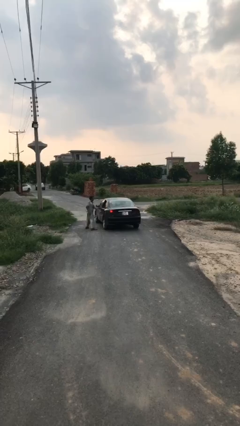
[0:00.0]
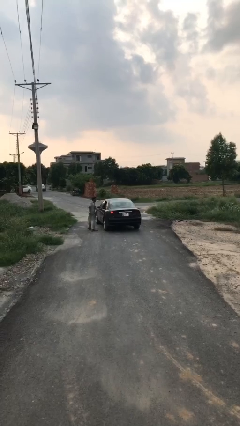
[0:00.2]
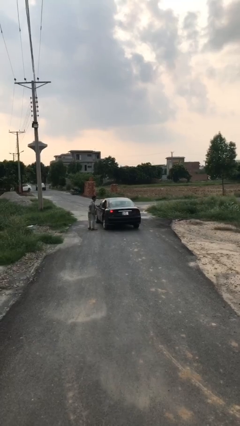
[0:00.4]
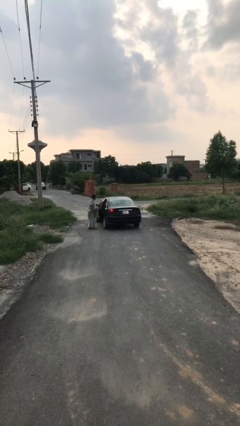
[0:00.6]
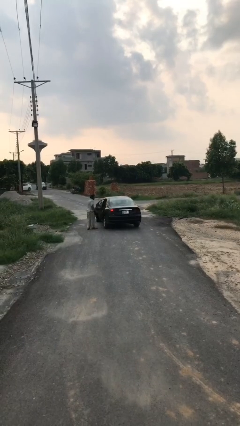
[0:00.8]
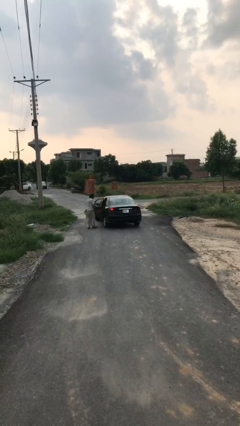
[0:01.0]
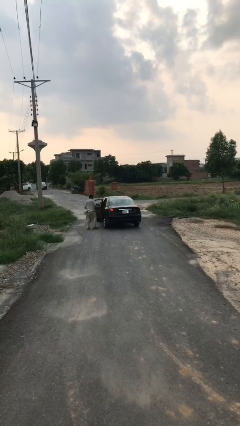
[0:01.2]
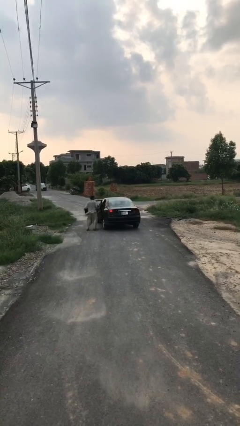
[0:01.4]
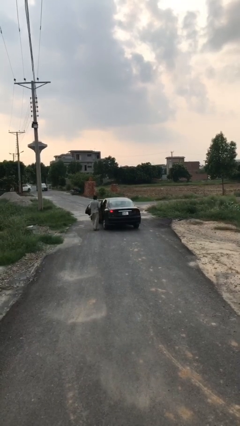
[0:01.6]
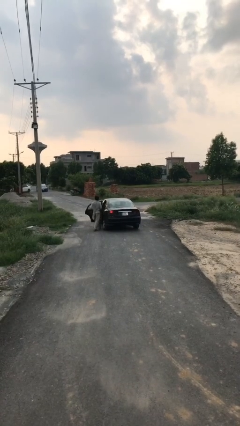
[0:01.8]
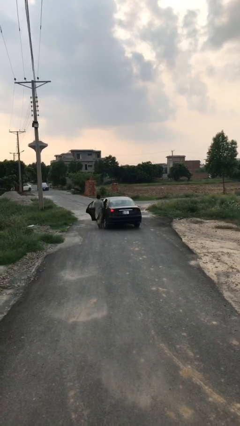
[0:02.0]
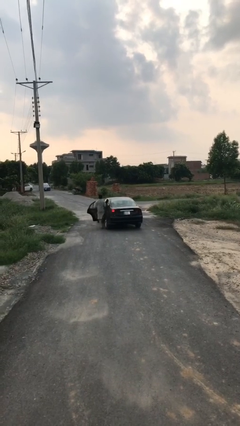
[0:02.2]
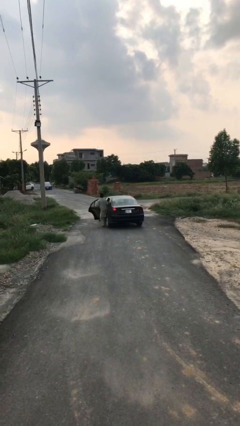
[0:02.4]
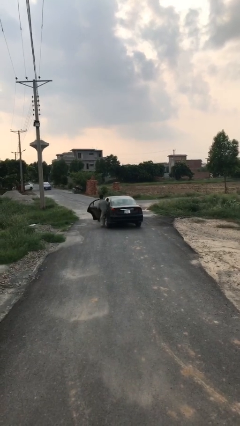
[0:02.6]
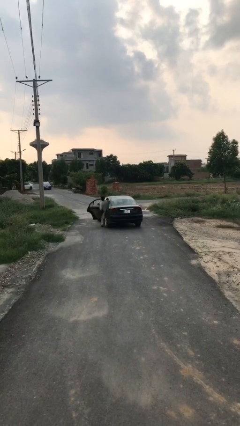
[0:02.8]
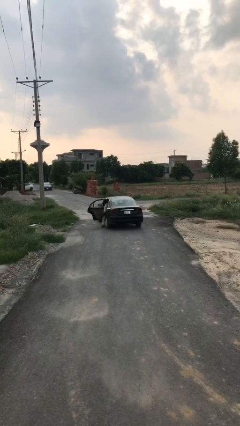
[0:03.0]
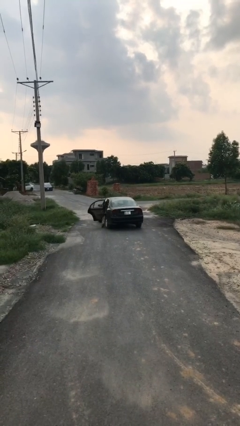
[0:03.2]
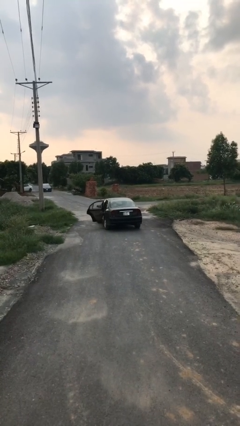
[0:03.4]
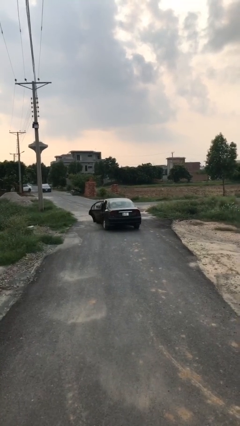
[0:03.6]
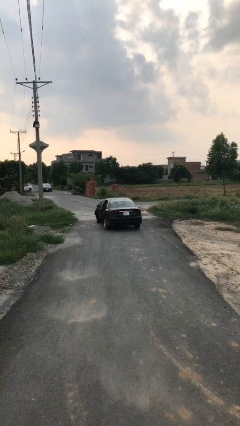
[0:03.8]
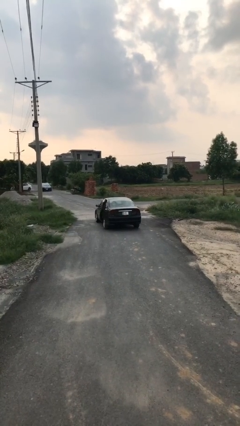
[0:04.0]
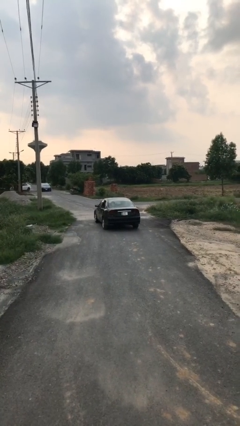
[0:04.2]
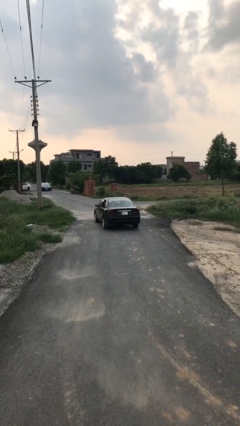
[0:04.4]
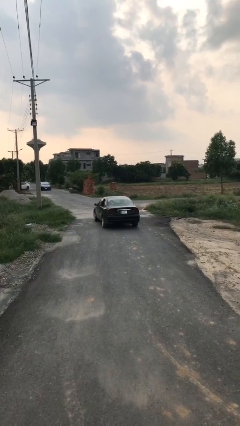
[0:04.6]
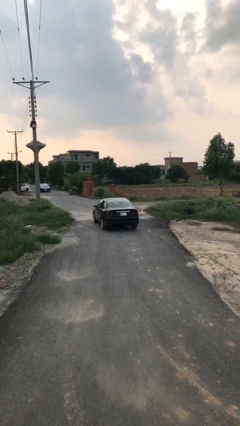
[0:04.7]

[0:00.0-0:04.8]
car picks up person

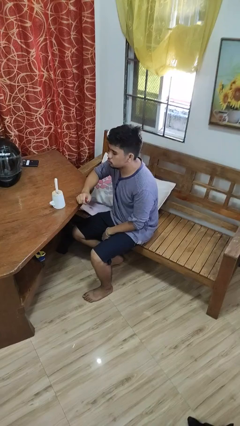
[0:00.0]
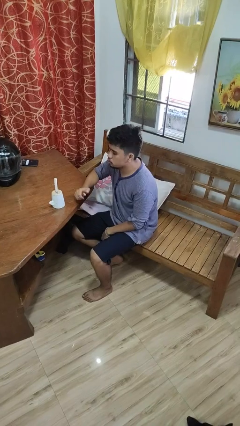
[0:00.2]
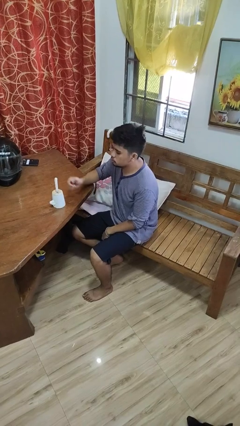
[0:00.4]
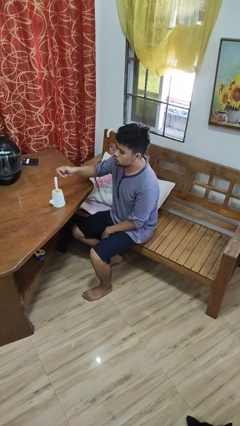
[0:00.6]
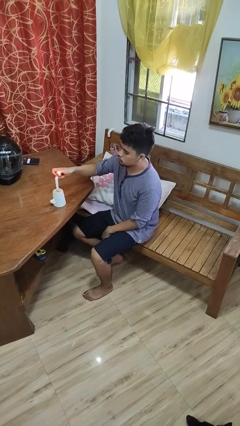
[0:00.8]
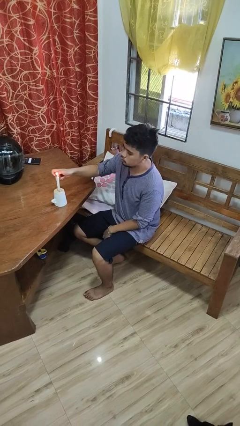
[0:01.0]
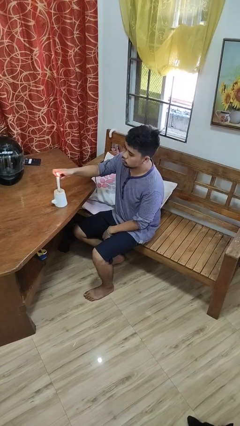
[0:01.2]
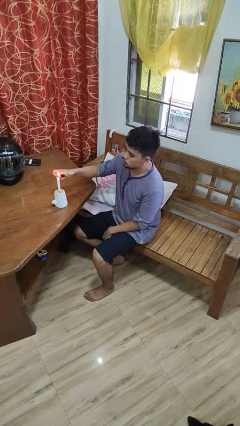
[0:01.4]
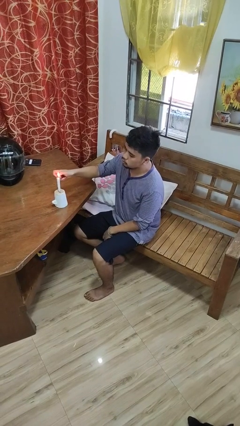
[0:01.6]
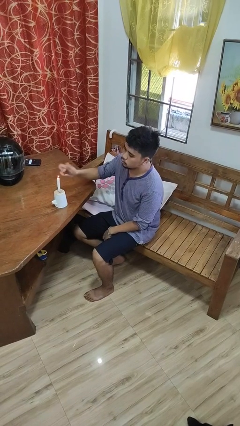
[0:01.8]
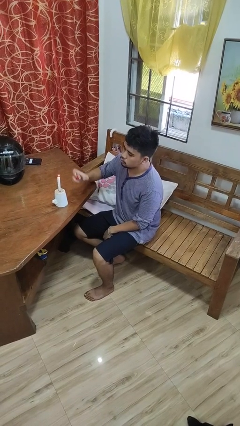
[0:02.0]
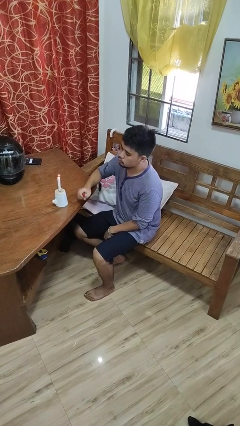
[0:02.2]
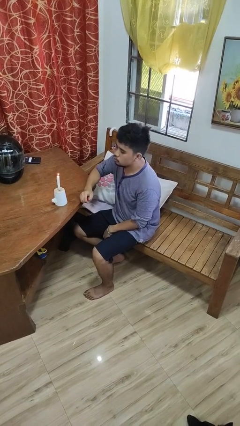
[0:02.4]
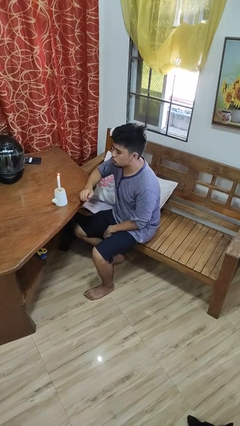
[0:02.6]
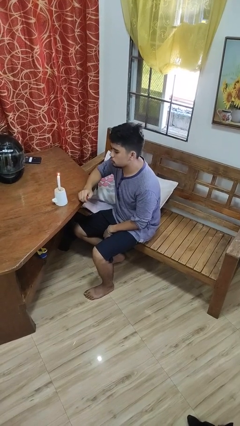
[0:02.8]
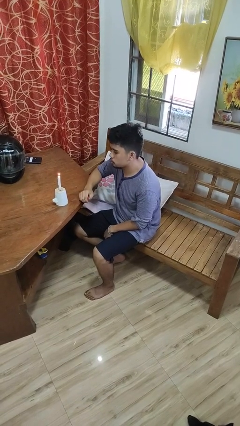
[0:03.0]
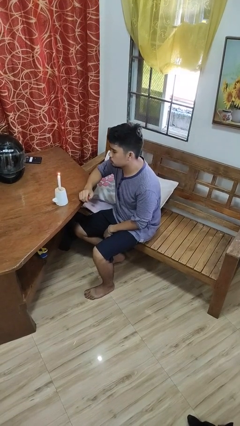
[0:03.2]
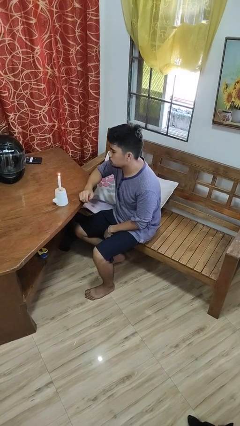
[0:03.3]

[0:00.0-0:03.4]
person lights candle

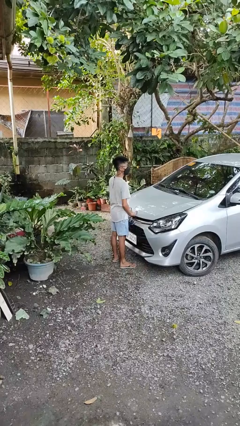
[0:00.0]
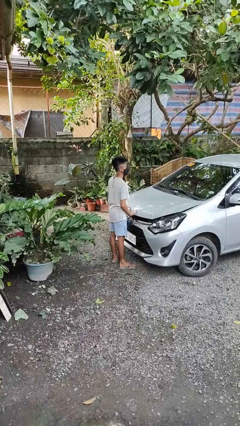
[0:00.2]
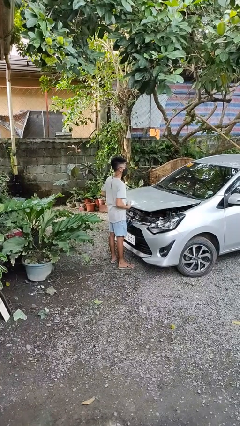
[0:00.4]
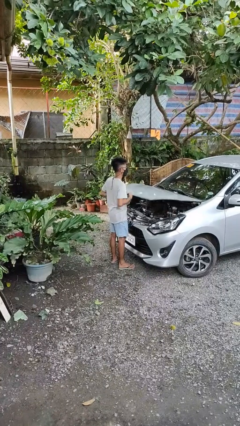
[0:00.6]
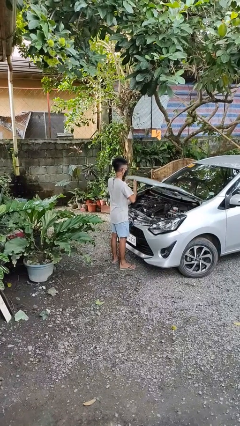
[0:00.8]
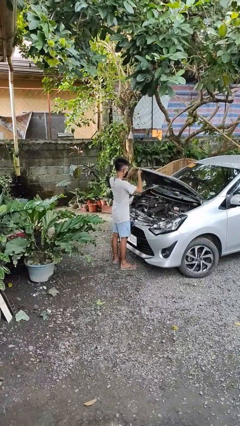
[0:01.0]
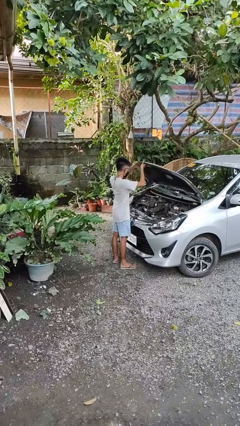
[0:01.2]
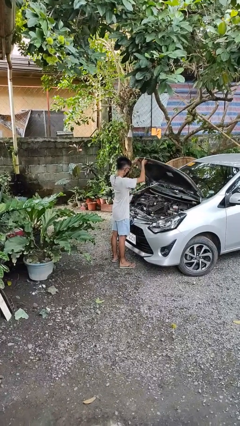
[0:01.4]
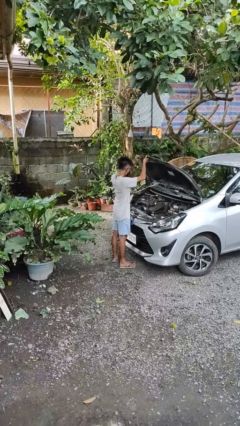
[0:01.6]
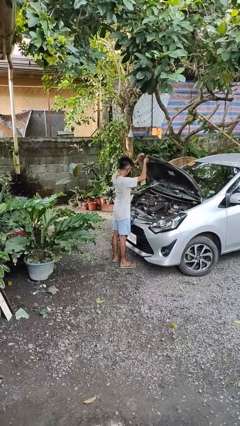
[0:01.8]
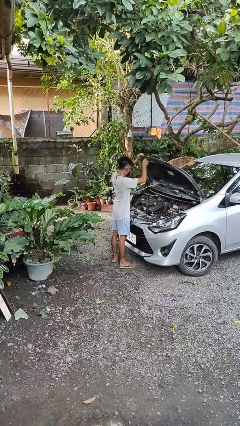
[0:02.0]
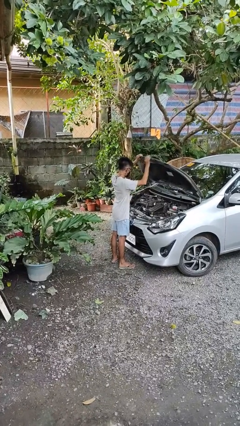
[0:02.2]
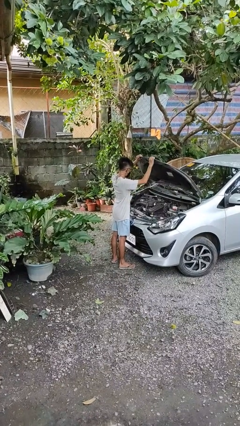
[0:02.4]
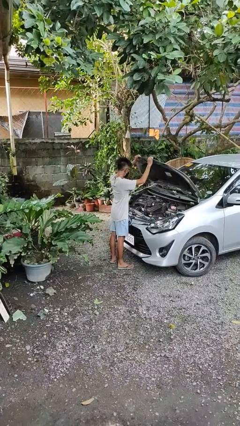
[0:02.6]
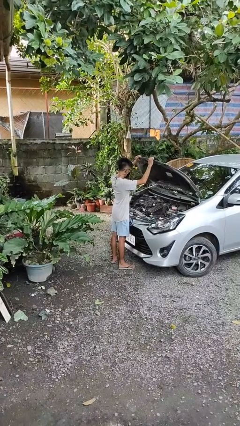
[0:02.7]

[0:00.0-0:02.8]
person opens car hood

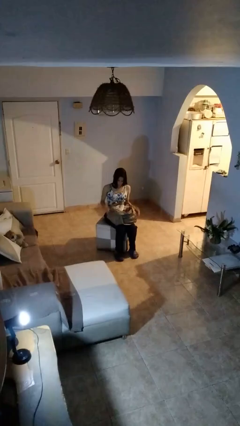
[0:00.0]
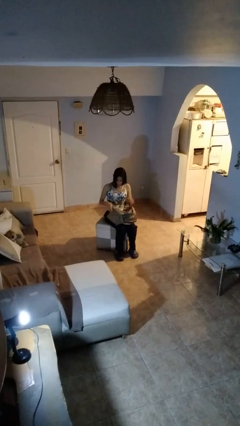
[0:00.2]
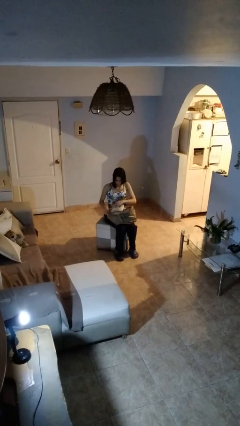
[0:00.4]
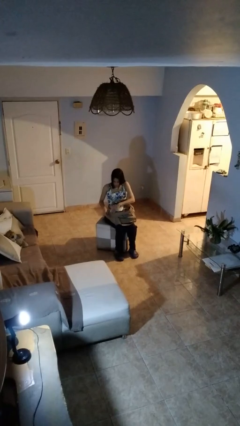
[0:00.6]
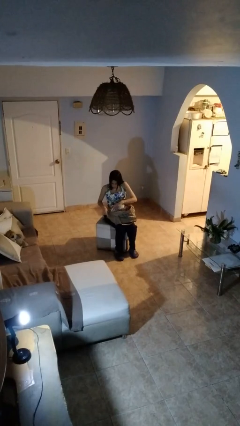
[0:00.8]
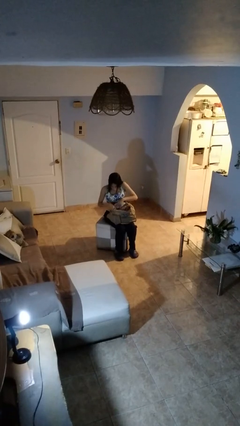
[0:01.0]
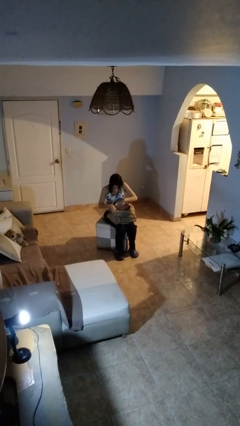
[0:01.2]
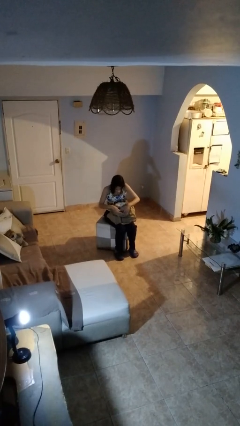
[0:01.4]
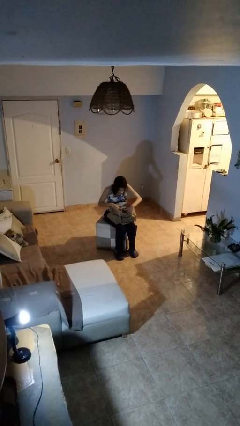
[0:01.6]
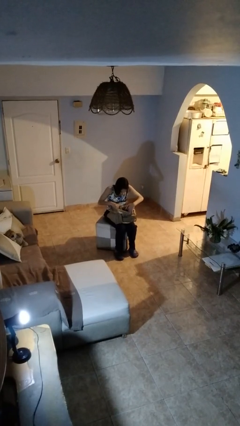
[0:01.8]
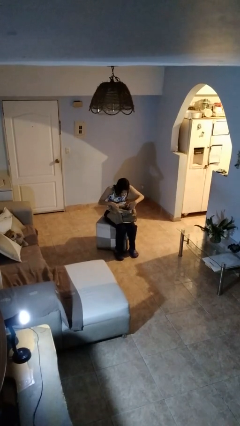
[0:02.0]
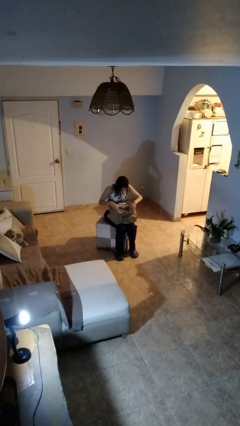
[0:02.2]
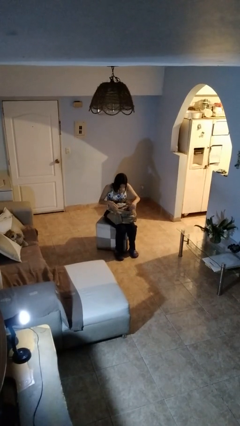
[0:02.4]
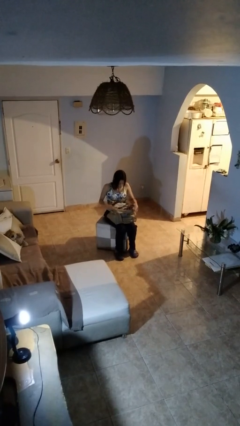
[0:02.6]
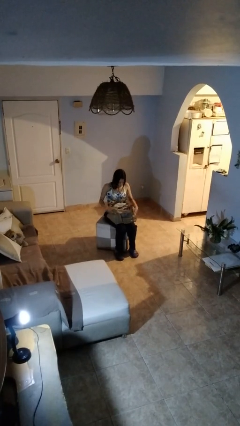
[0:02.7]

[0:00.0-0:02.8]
person searches in bag

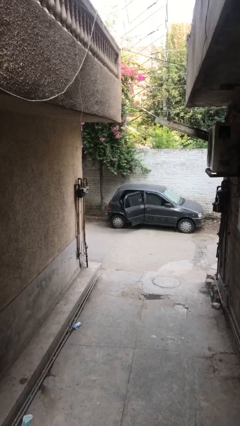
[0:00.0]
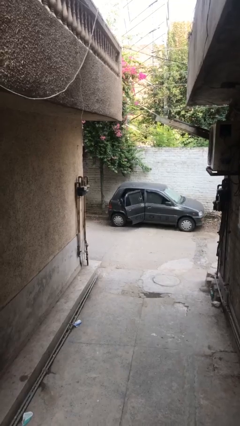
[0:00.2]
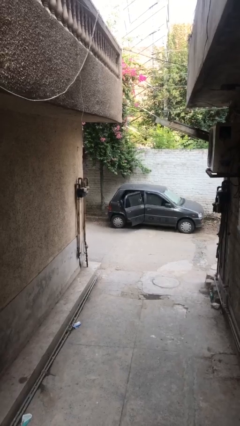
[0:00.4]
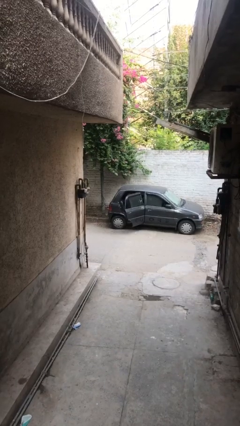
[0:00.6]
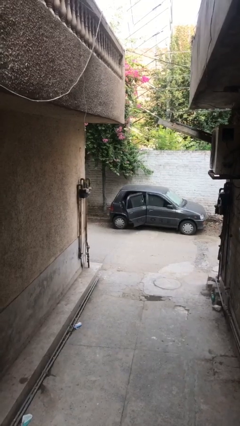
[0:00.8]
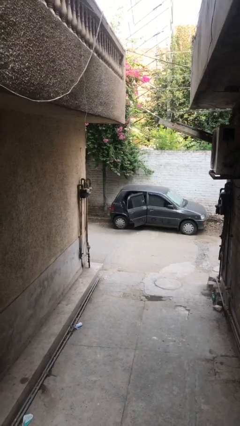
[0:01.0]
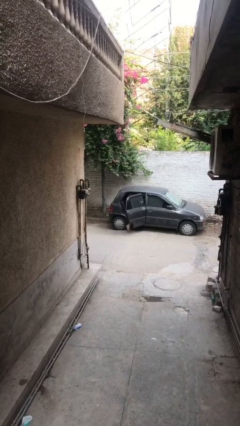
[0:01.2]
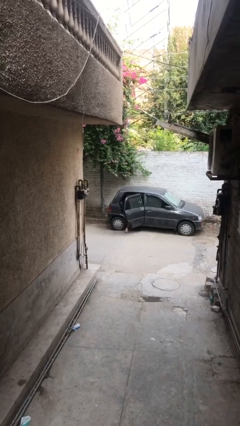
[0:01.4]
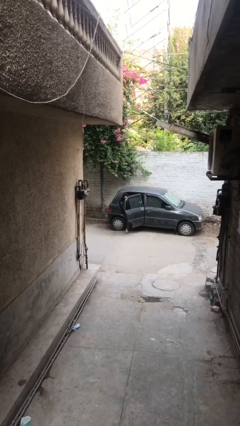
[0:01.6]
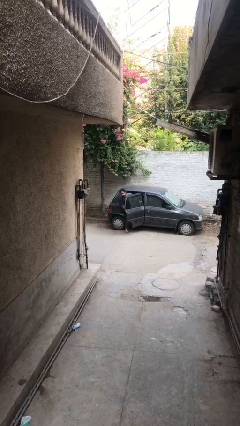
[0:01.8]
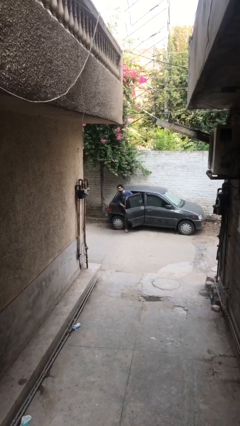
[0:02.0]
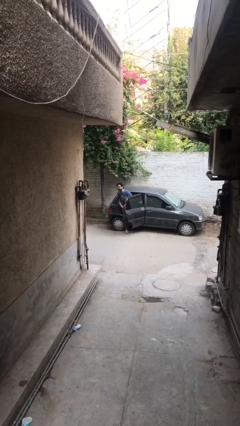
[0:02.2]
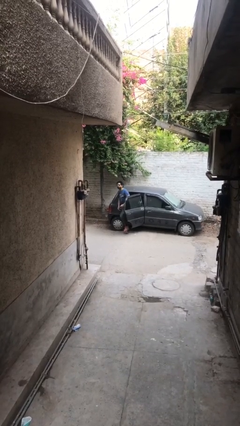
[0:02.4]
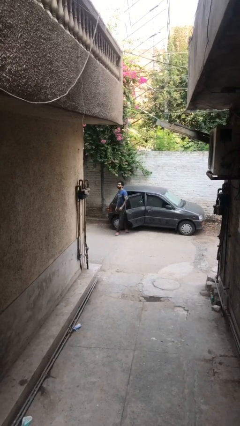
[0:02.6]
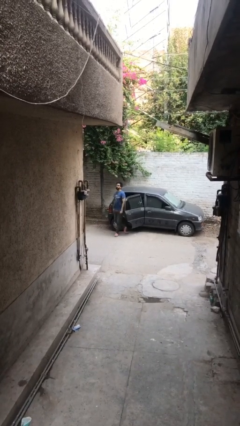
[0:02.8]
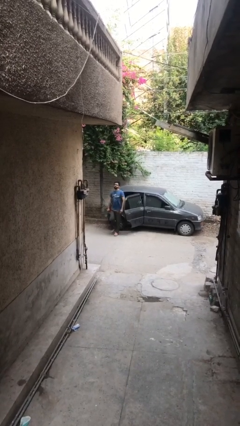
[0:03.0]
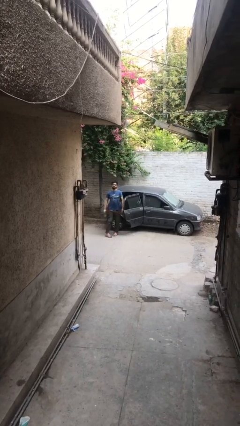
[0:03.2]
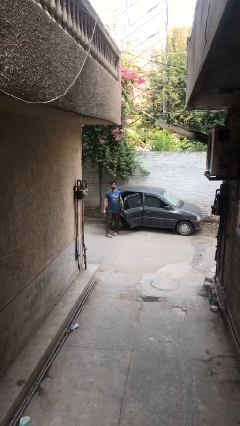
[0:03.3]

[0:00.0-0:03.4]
person exits car

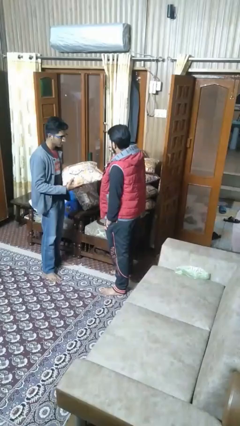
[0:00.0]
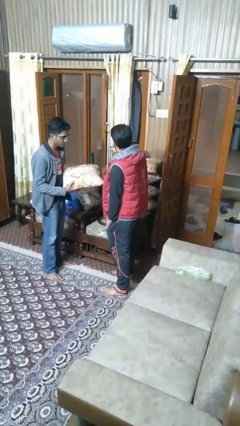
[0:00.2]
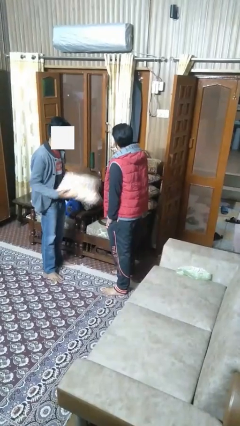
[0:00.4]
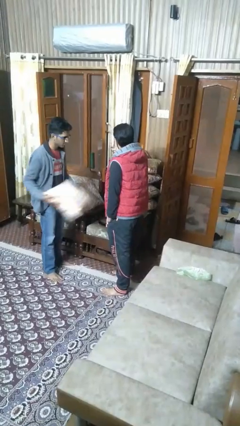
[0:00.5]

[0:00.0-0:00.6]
person transfers object to person

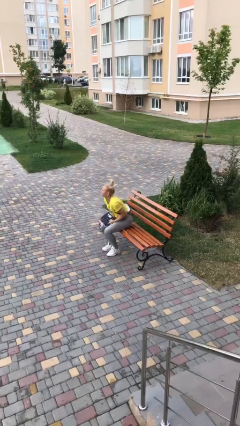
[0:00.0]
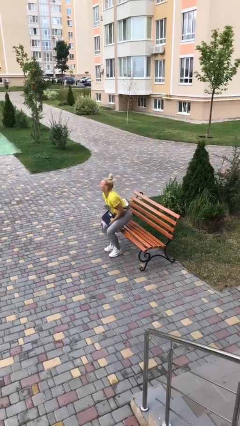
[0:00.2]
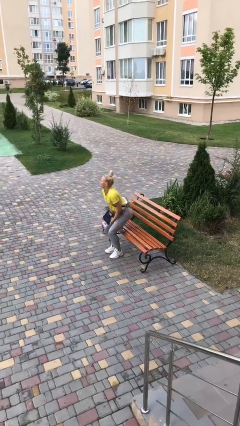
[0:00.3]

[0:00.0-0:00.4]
person stands up
